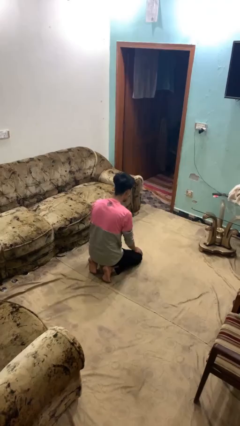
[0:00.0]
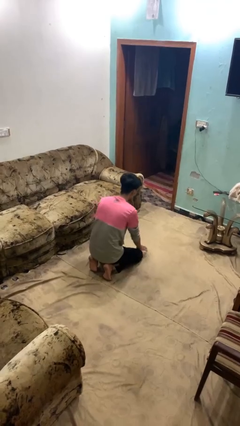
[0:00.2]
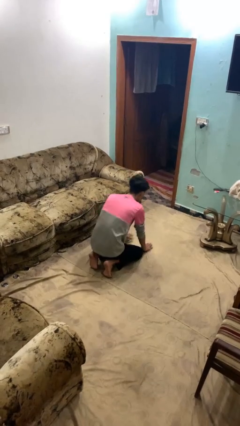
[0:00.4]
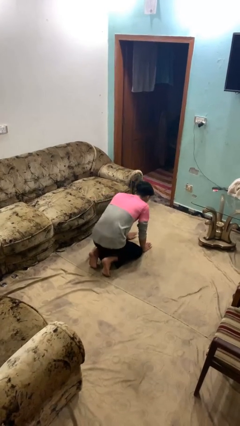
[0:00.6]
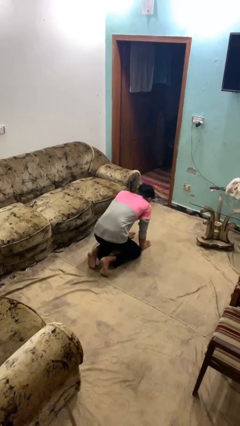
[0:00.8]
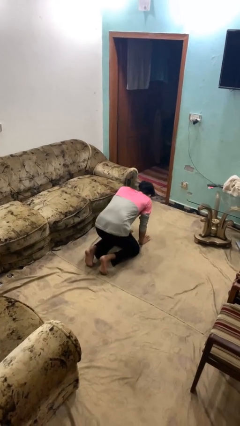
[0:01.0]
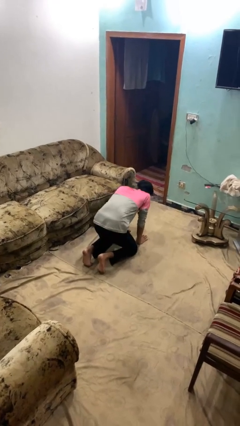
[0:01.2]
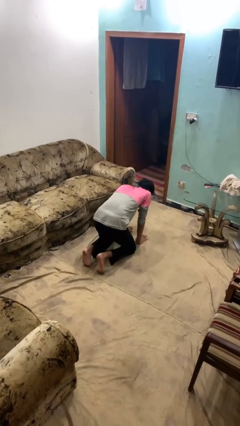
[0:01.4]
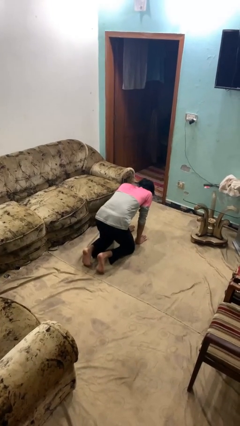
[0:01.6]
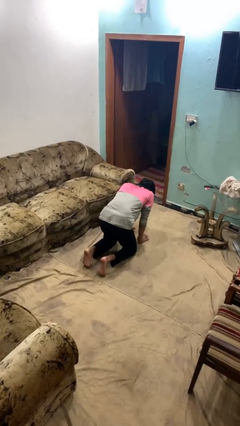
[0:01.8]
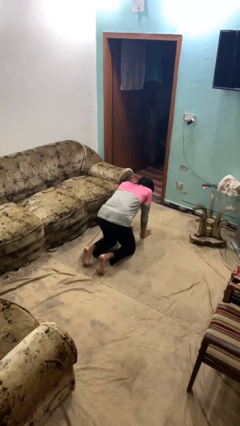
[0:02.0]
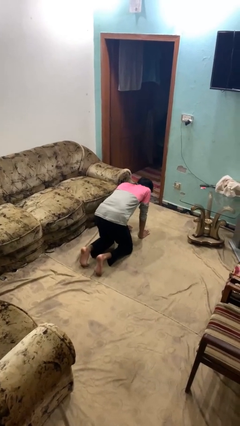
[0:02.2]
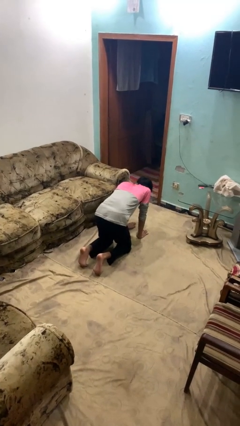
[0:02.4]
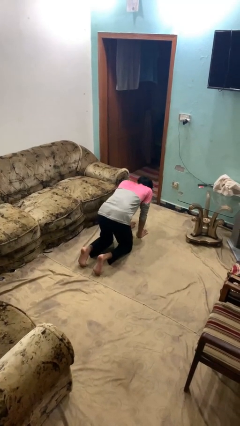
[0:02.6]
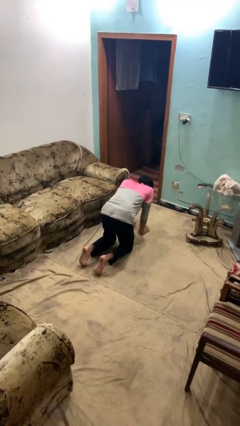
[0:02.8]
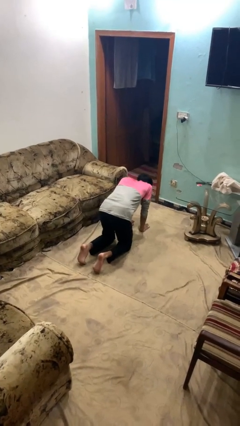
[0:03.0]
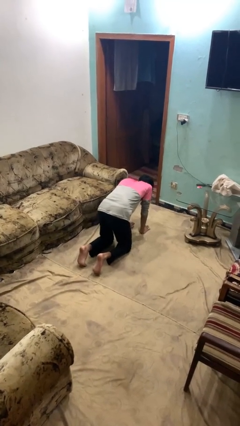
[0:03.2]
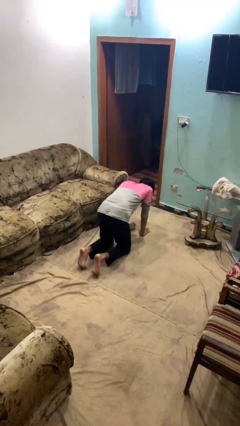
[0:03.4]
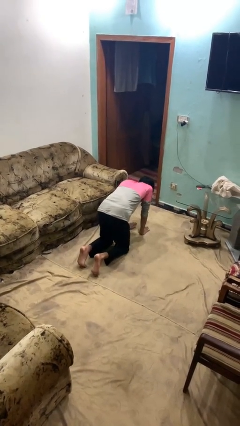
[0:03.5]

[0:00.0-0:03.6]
person crawls

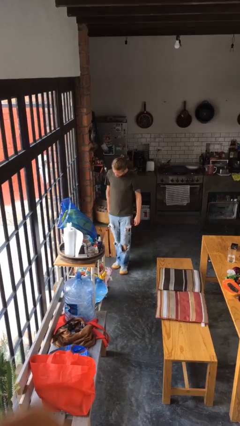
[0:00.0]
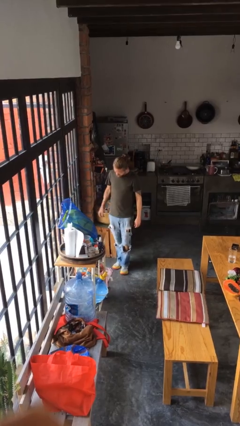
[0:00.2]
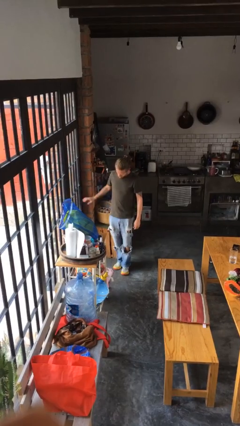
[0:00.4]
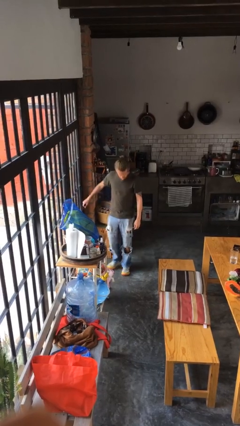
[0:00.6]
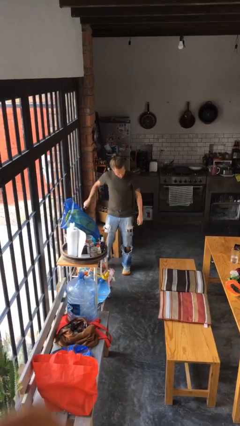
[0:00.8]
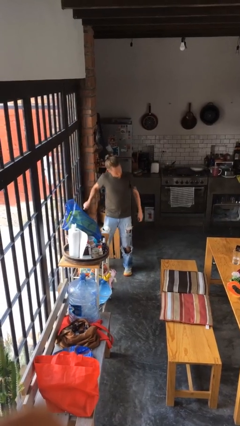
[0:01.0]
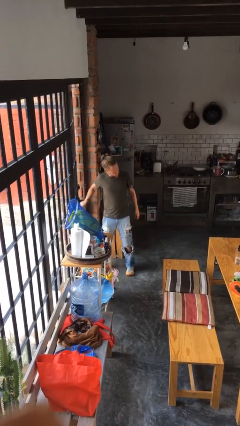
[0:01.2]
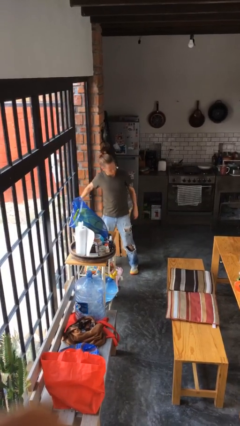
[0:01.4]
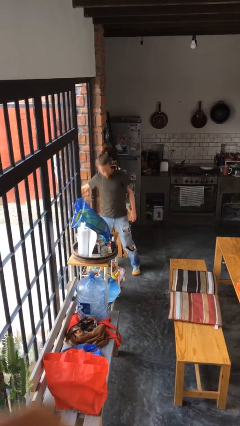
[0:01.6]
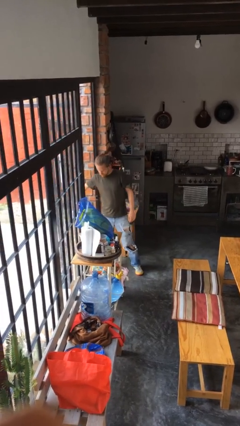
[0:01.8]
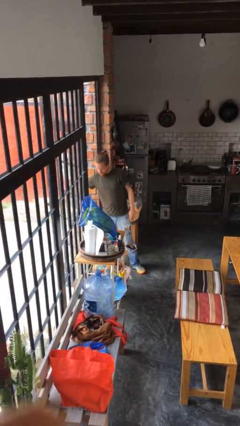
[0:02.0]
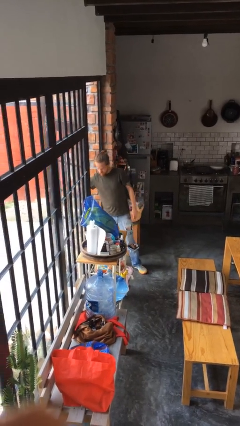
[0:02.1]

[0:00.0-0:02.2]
person opens facility door

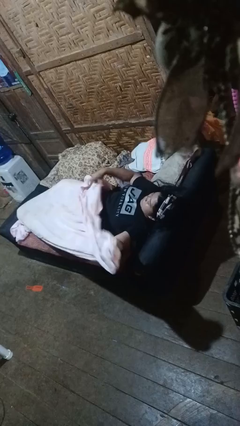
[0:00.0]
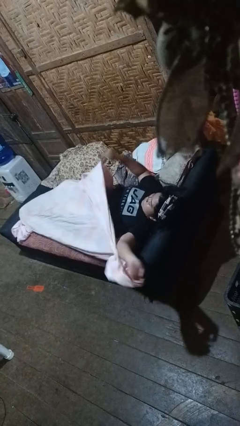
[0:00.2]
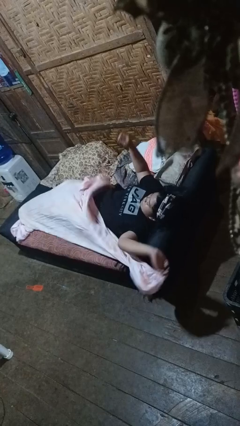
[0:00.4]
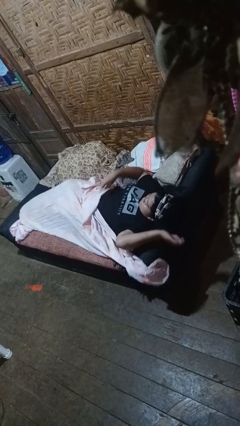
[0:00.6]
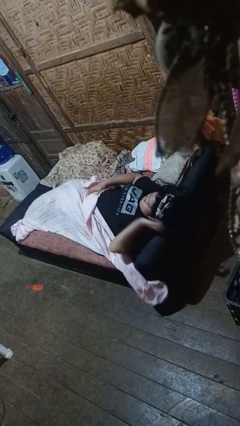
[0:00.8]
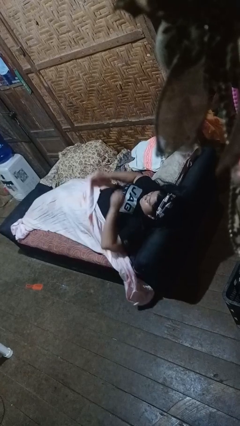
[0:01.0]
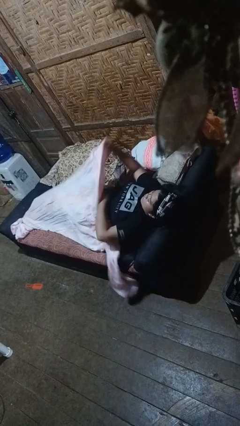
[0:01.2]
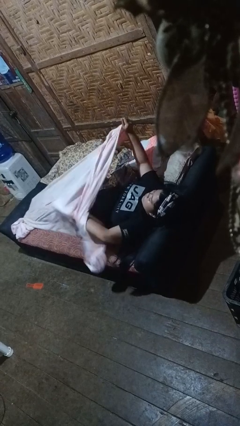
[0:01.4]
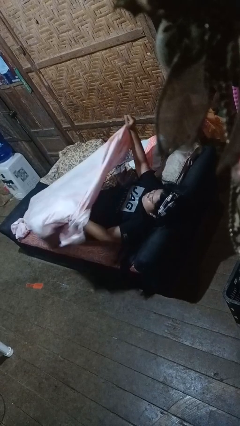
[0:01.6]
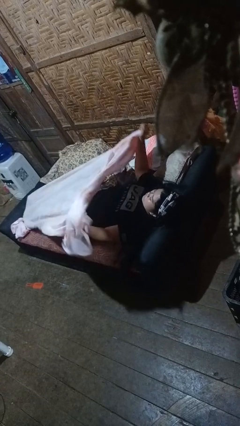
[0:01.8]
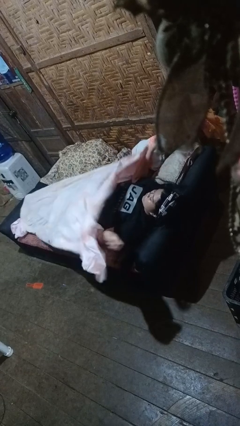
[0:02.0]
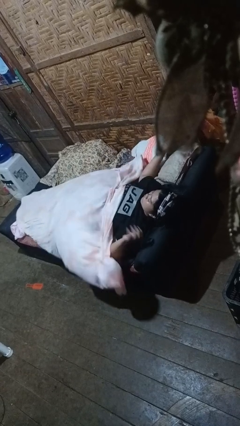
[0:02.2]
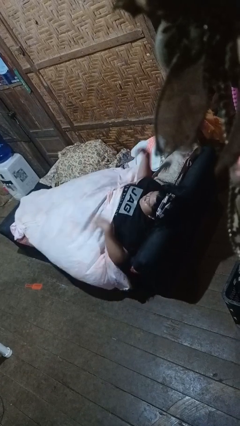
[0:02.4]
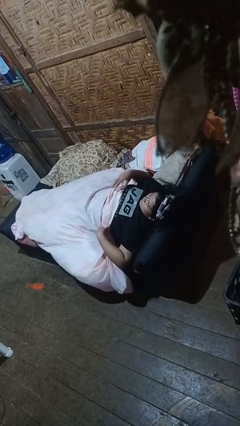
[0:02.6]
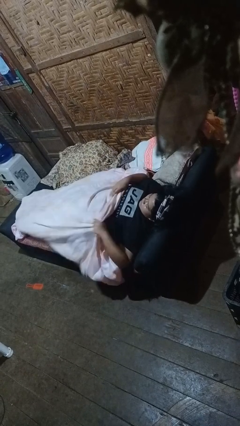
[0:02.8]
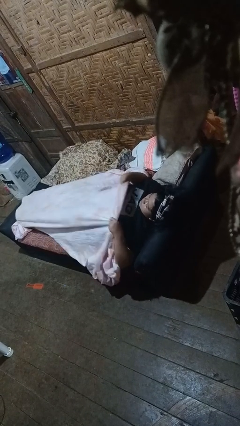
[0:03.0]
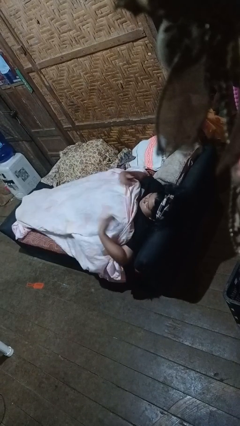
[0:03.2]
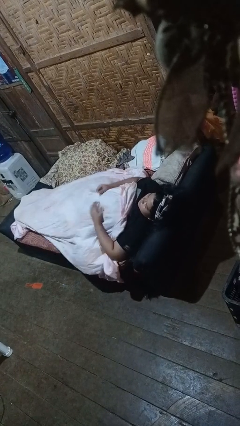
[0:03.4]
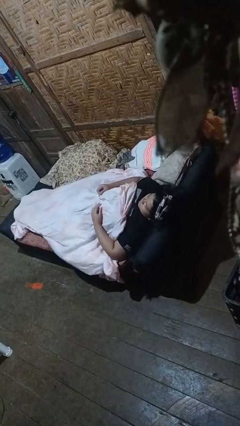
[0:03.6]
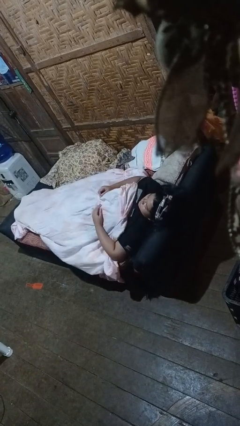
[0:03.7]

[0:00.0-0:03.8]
person covers with bedsheets

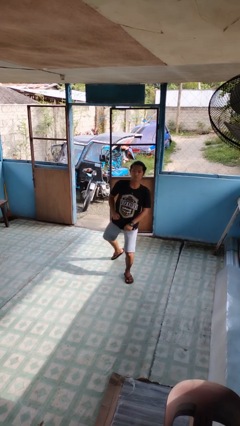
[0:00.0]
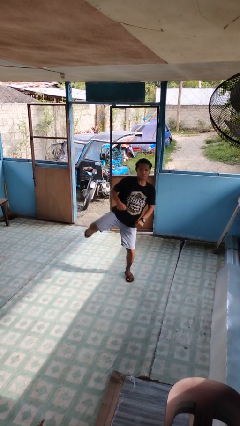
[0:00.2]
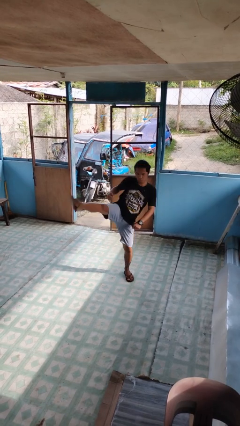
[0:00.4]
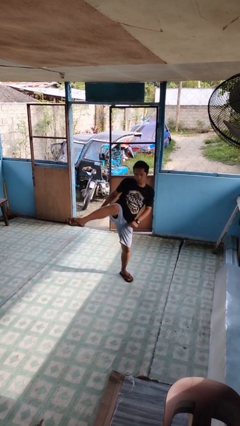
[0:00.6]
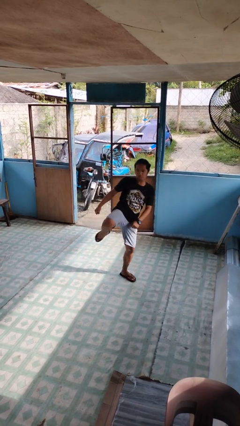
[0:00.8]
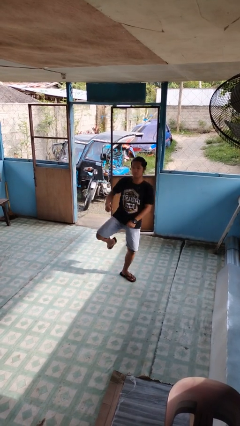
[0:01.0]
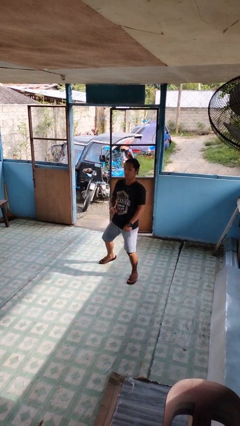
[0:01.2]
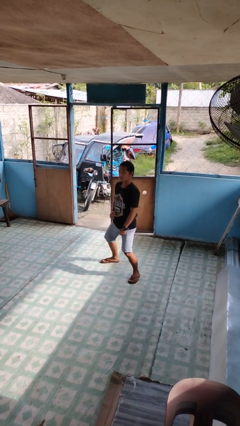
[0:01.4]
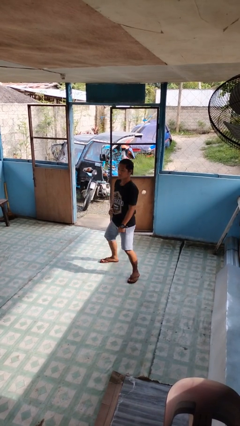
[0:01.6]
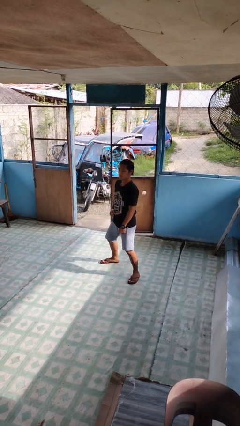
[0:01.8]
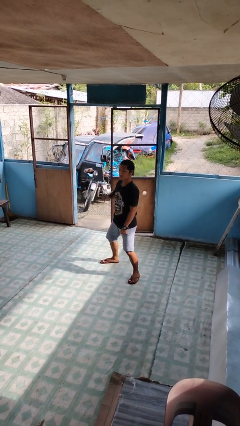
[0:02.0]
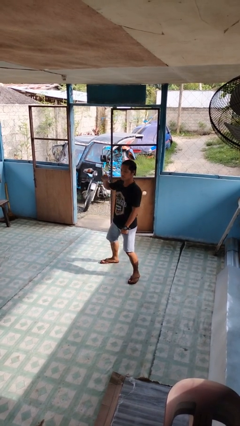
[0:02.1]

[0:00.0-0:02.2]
person karate kicks

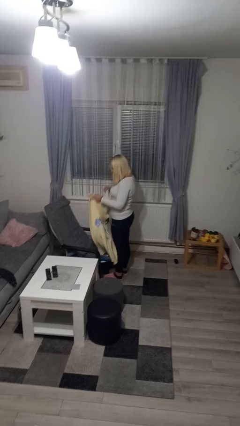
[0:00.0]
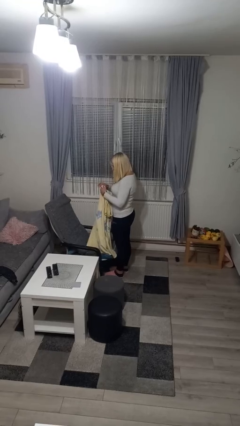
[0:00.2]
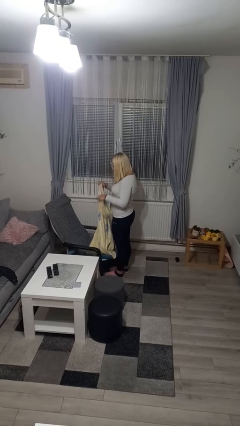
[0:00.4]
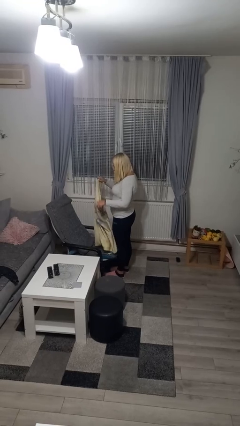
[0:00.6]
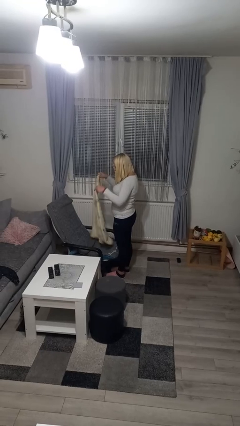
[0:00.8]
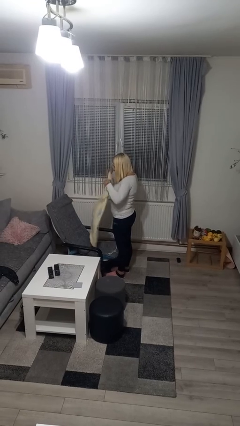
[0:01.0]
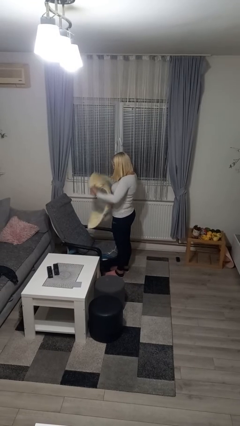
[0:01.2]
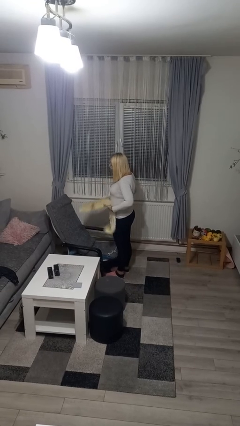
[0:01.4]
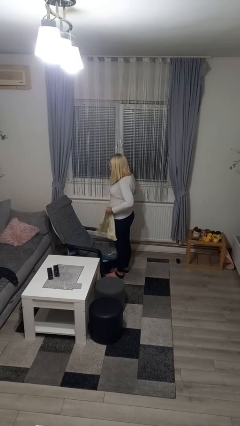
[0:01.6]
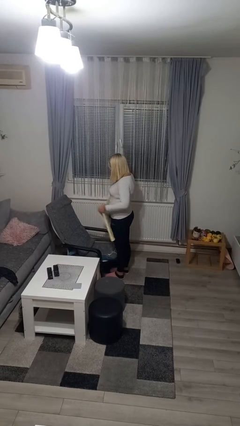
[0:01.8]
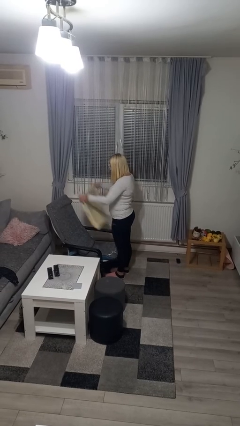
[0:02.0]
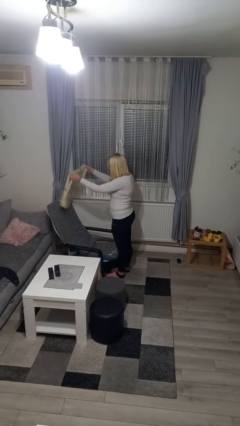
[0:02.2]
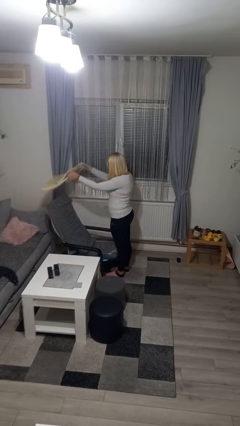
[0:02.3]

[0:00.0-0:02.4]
person folds blanket

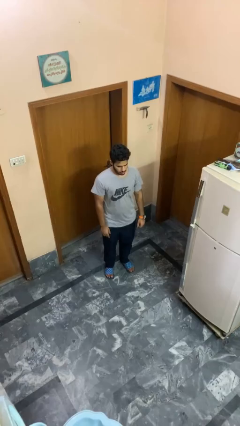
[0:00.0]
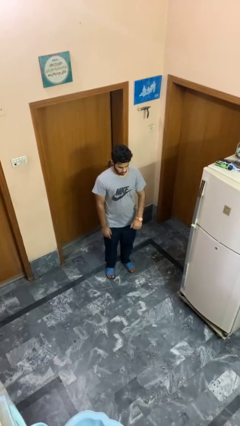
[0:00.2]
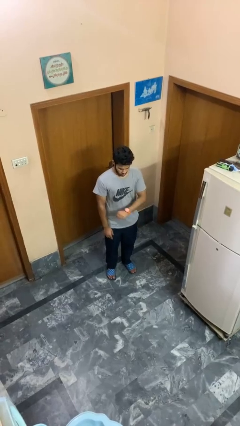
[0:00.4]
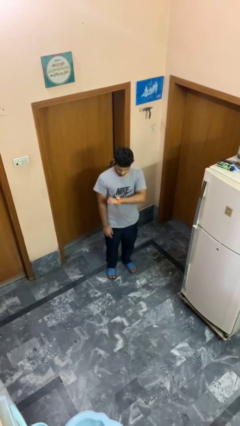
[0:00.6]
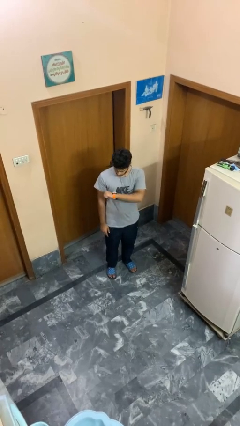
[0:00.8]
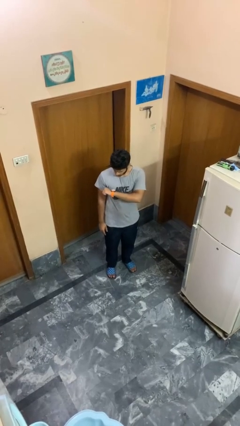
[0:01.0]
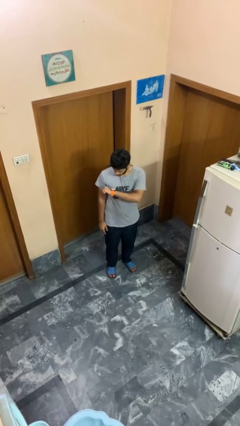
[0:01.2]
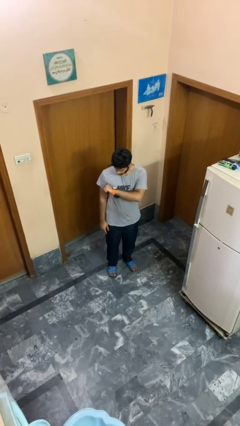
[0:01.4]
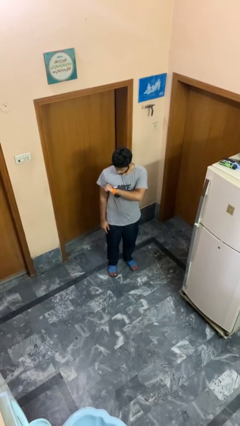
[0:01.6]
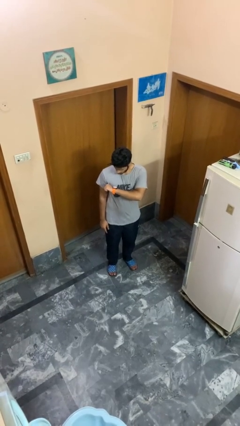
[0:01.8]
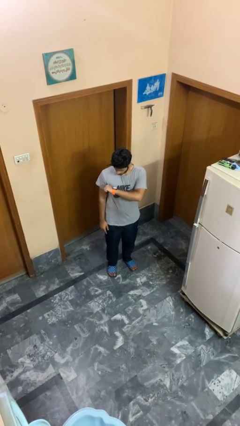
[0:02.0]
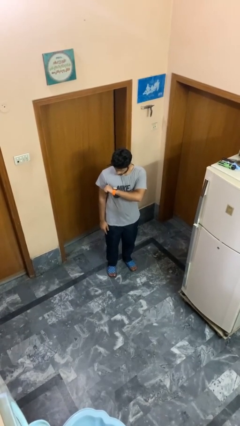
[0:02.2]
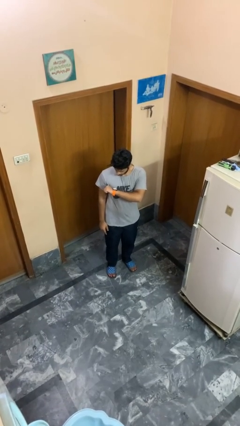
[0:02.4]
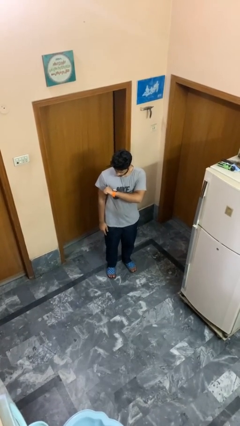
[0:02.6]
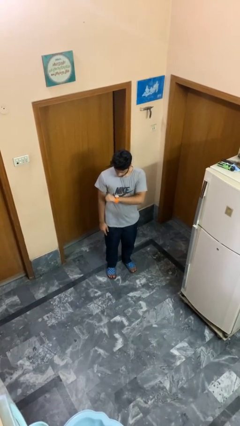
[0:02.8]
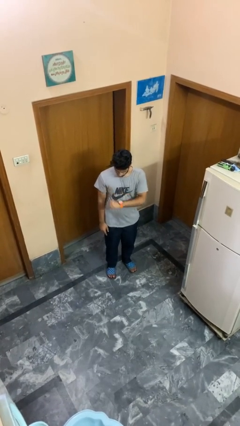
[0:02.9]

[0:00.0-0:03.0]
person looks at wristwatch
